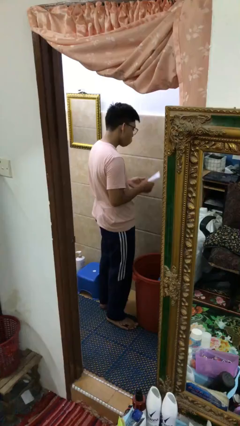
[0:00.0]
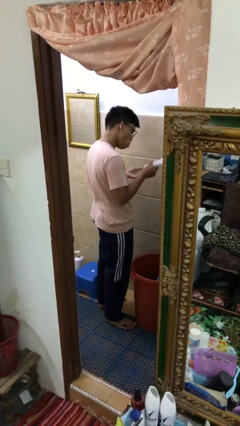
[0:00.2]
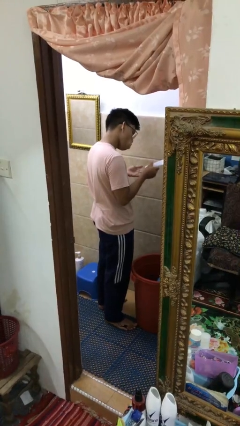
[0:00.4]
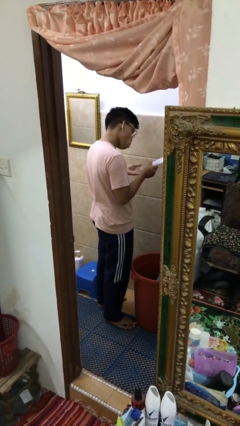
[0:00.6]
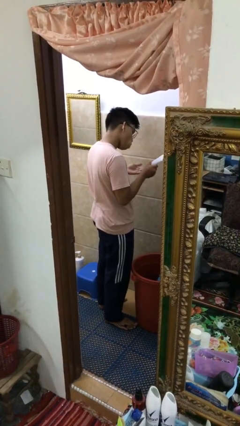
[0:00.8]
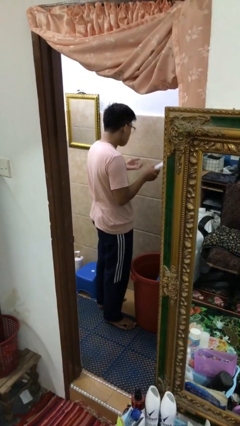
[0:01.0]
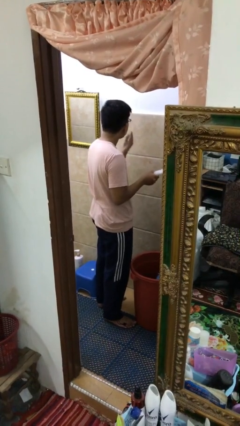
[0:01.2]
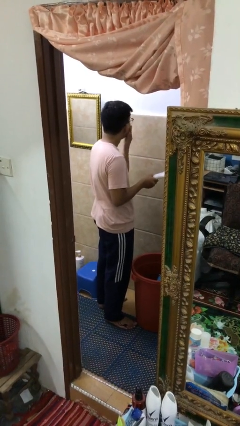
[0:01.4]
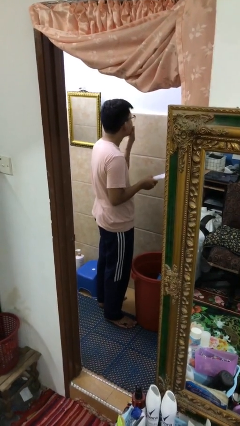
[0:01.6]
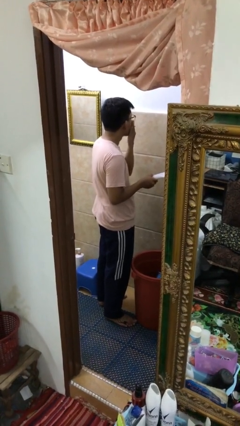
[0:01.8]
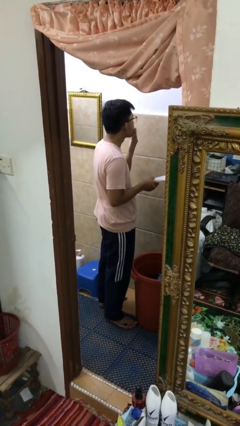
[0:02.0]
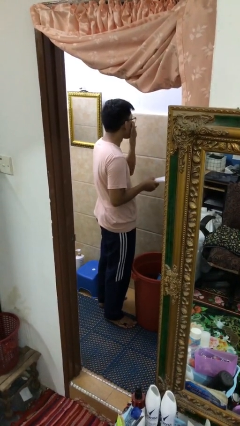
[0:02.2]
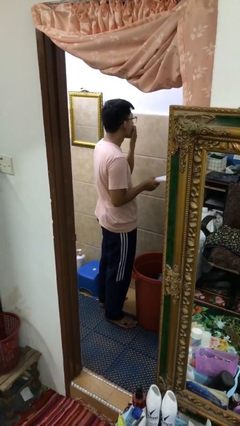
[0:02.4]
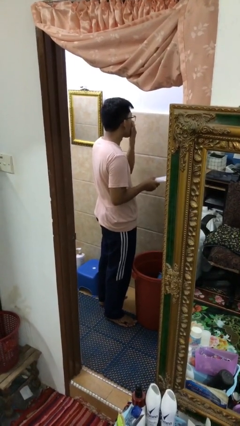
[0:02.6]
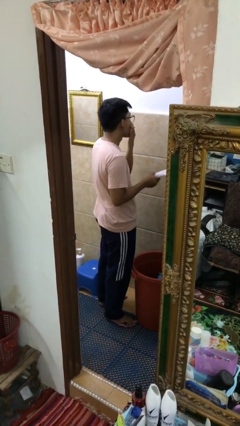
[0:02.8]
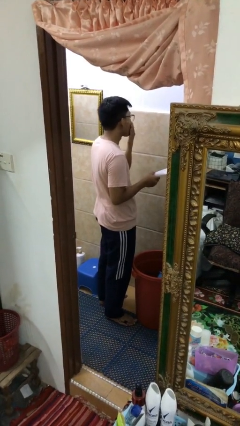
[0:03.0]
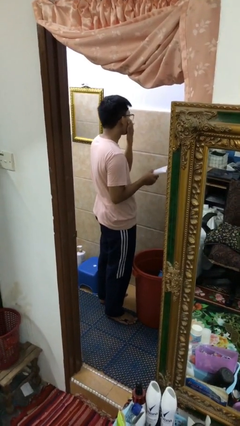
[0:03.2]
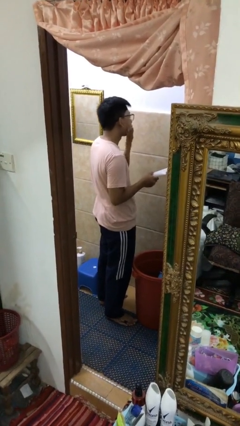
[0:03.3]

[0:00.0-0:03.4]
person applies facial moisturizer

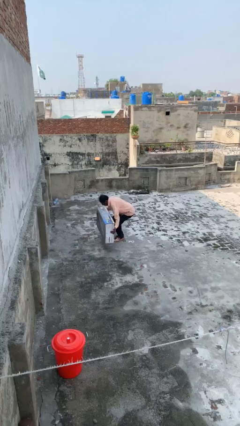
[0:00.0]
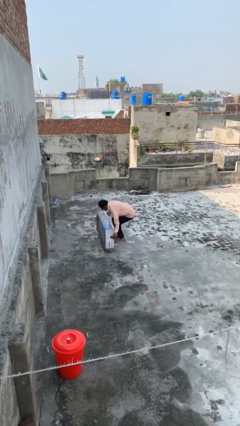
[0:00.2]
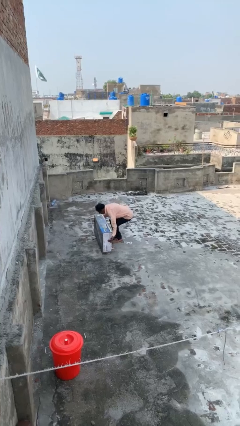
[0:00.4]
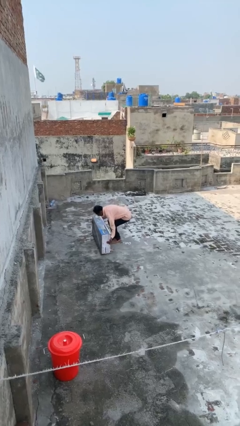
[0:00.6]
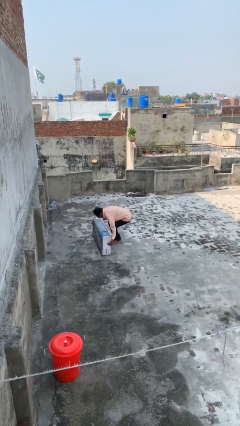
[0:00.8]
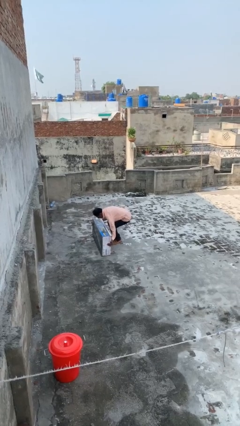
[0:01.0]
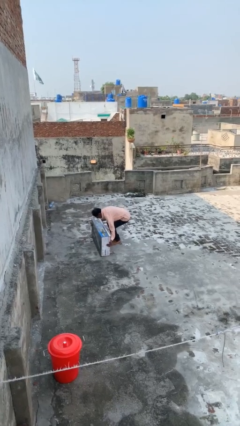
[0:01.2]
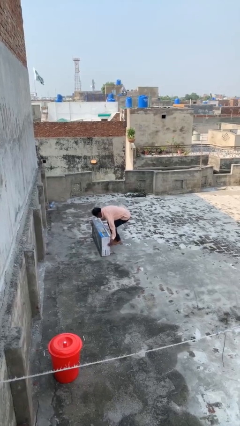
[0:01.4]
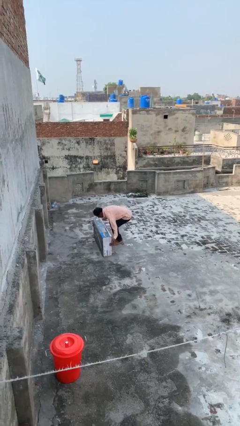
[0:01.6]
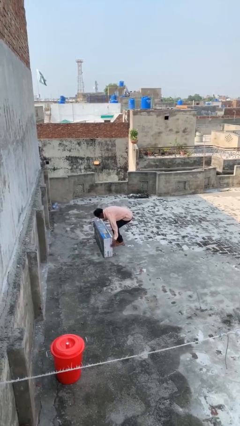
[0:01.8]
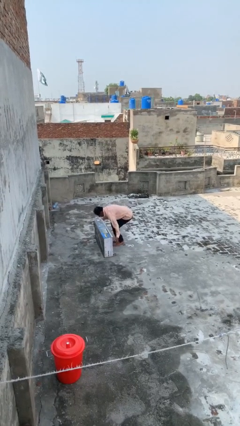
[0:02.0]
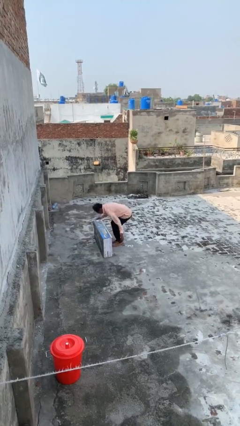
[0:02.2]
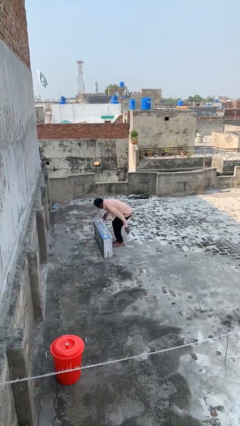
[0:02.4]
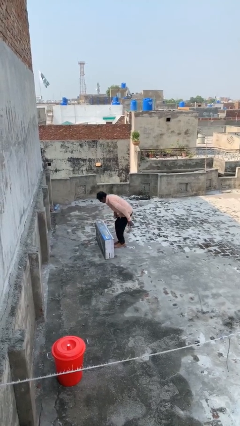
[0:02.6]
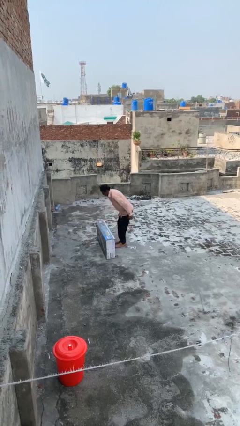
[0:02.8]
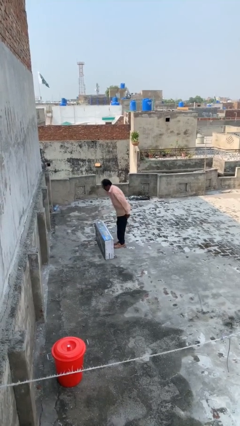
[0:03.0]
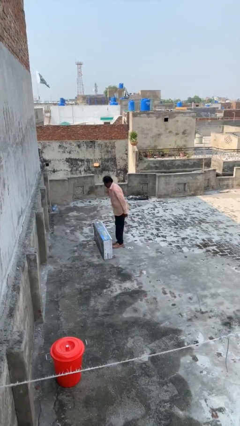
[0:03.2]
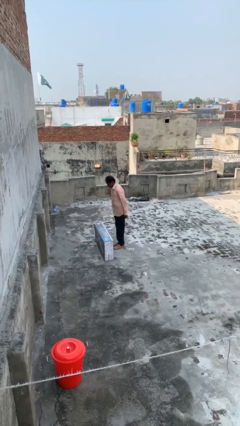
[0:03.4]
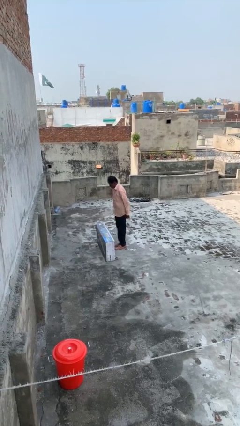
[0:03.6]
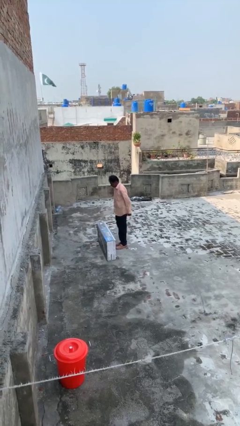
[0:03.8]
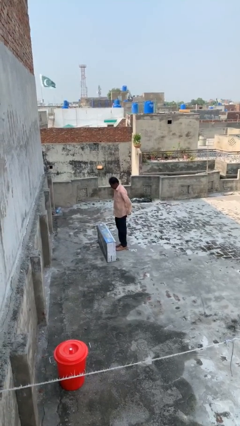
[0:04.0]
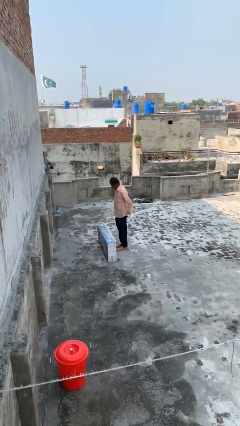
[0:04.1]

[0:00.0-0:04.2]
person puts down object on floor

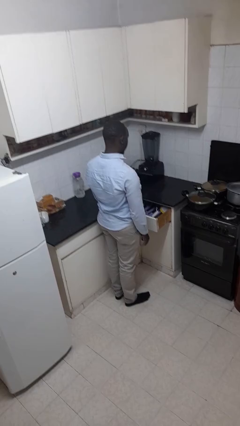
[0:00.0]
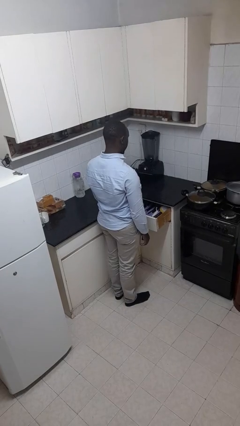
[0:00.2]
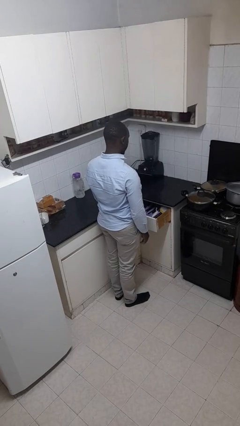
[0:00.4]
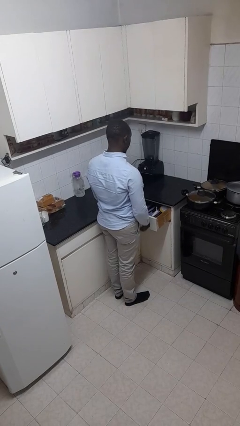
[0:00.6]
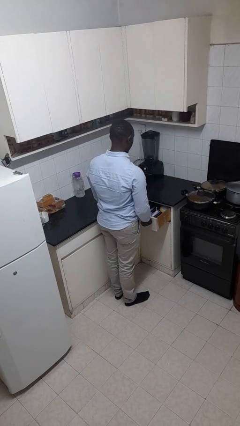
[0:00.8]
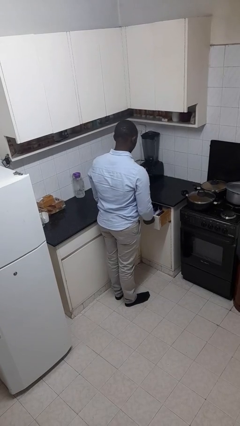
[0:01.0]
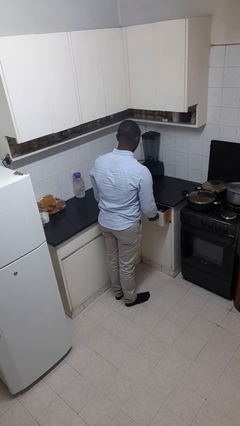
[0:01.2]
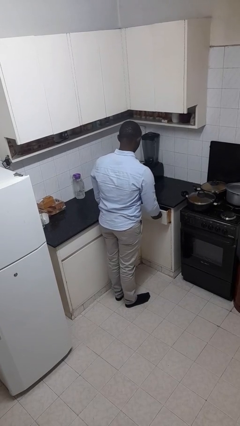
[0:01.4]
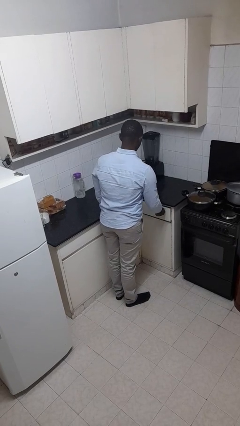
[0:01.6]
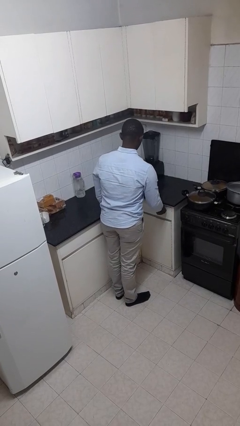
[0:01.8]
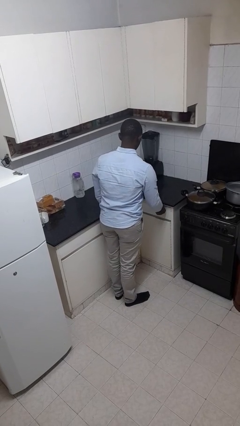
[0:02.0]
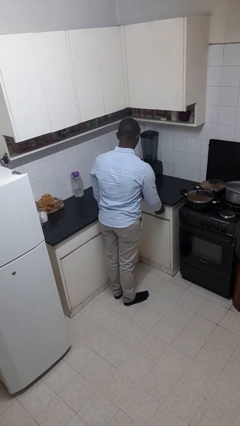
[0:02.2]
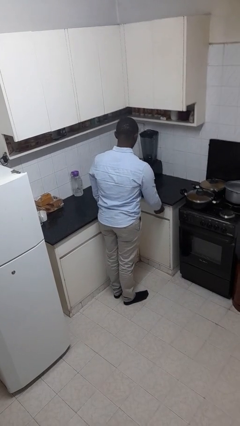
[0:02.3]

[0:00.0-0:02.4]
person closes kitchen drawer

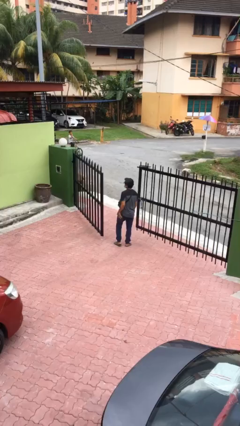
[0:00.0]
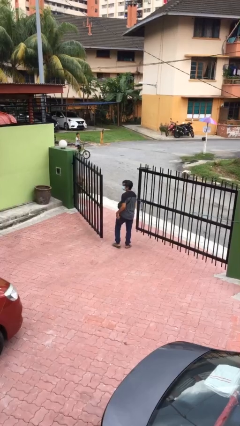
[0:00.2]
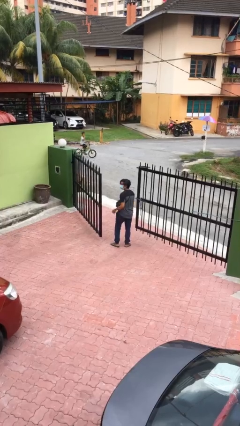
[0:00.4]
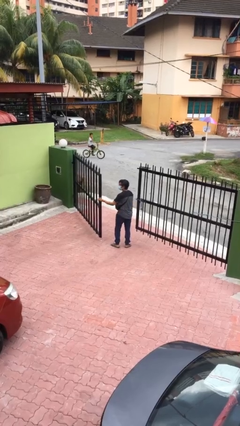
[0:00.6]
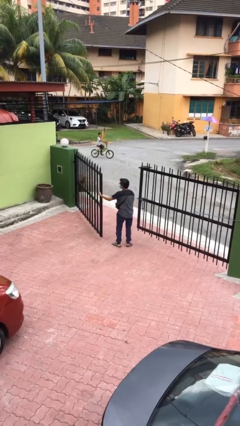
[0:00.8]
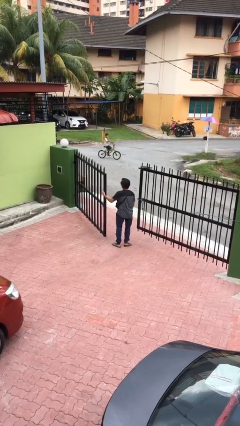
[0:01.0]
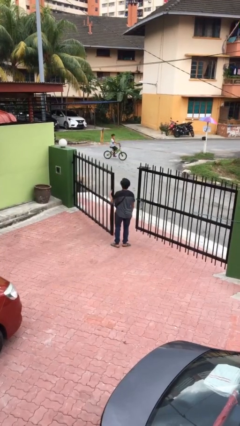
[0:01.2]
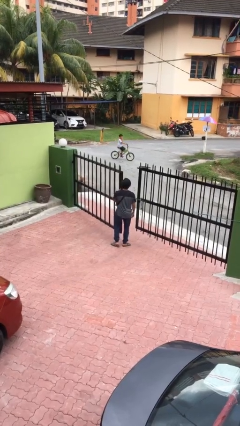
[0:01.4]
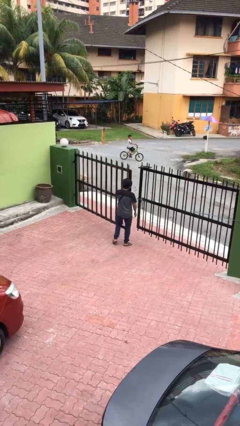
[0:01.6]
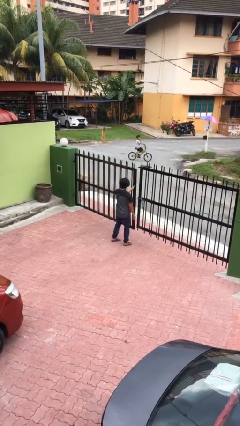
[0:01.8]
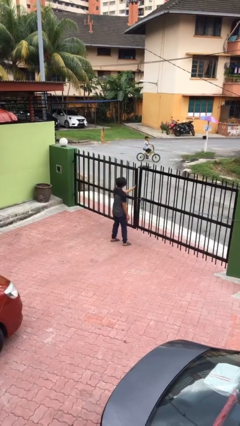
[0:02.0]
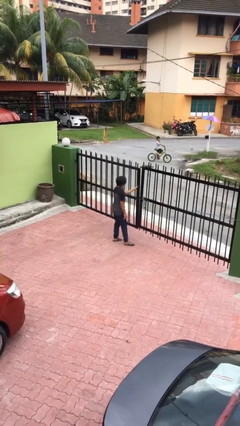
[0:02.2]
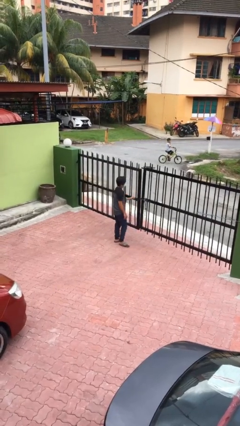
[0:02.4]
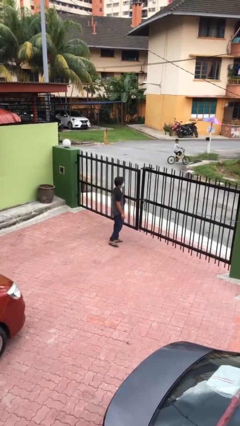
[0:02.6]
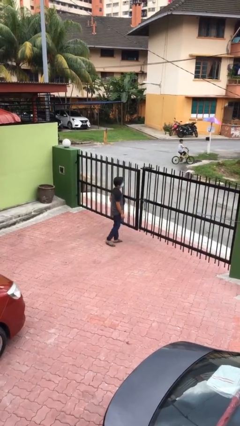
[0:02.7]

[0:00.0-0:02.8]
person closes facility door

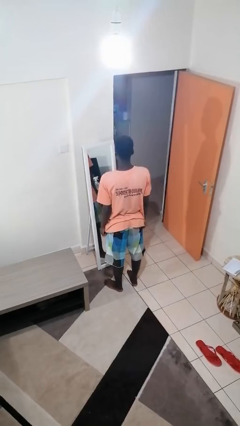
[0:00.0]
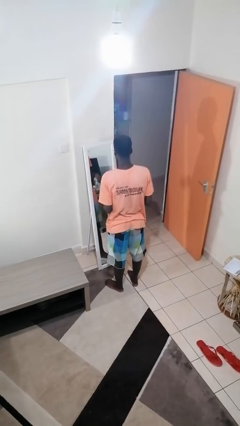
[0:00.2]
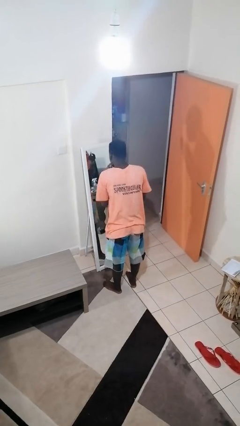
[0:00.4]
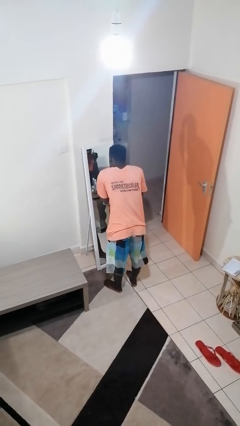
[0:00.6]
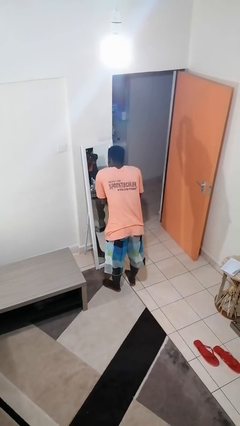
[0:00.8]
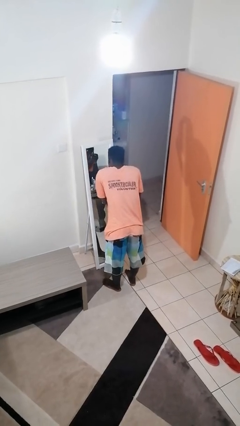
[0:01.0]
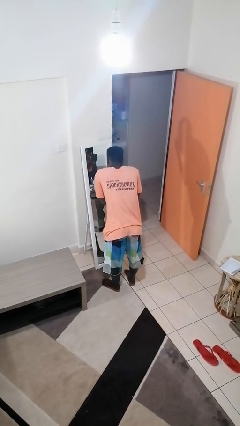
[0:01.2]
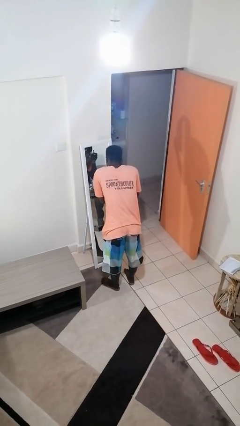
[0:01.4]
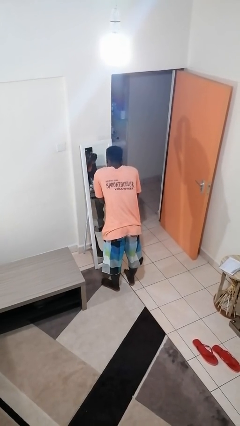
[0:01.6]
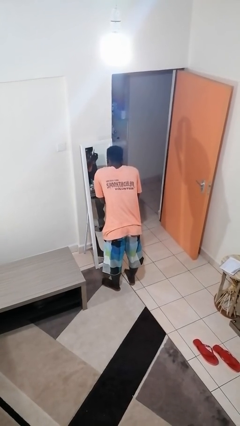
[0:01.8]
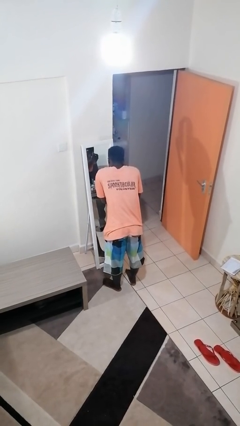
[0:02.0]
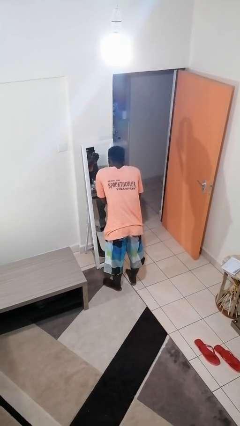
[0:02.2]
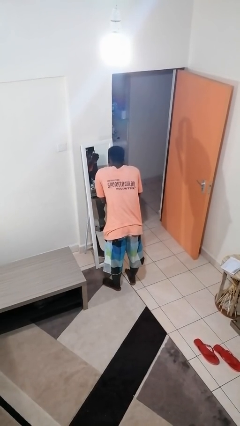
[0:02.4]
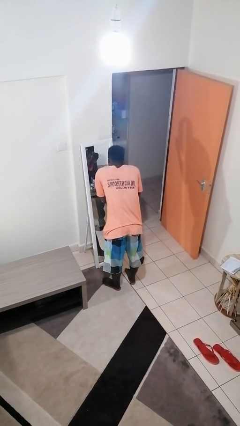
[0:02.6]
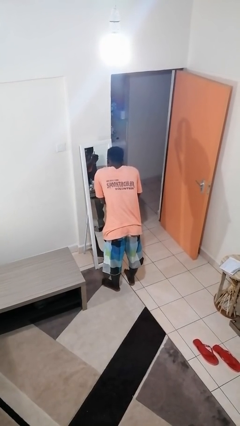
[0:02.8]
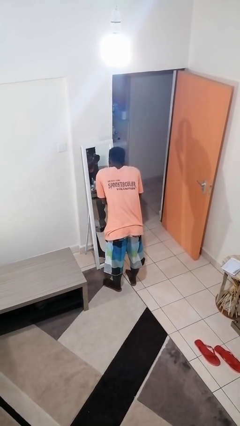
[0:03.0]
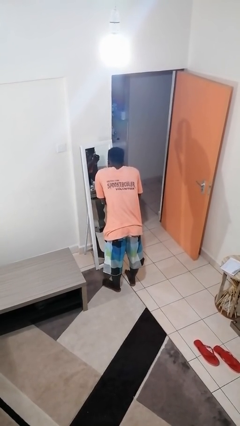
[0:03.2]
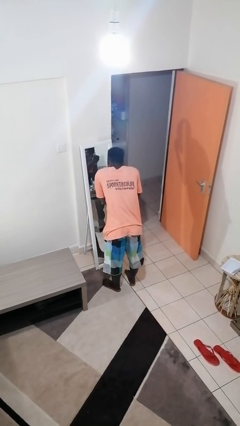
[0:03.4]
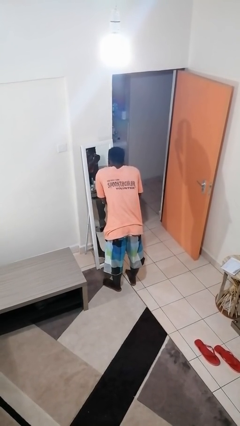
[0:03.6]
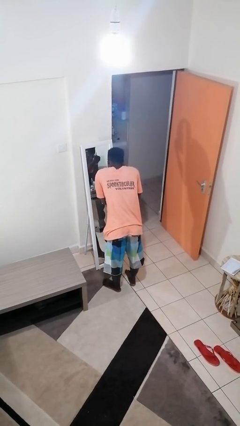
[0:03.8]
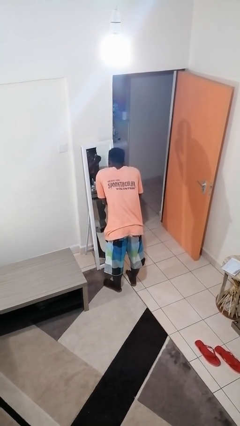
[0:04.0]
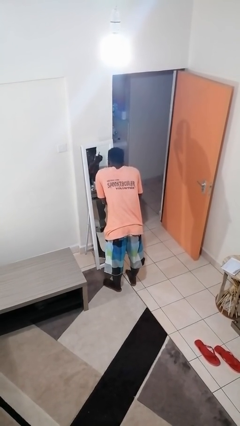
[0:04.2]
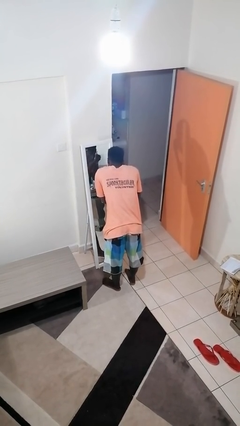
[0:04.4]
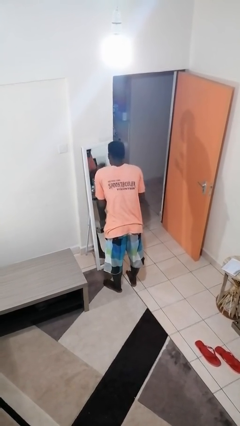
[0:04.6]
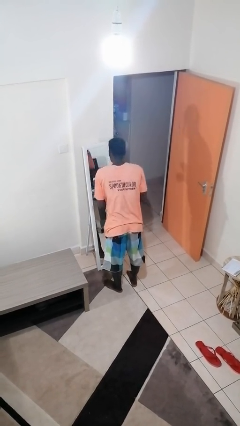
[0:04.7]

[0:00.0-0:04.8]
person applies eye makeup
